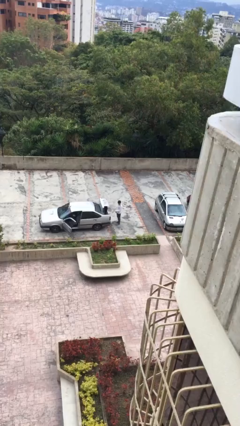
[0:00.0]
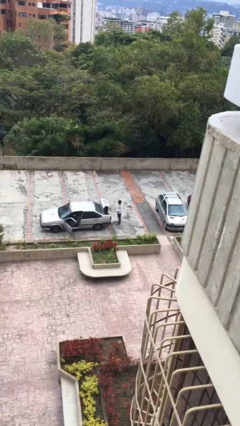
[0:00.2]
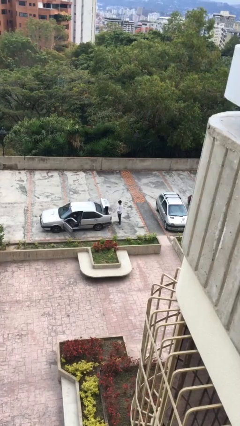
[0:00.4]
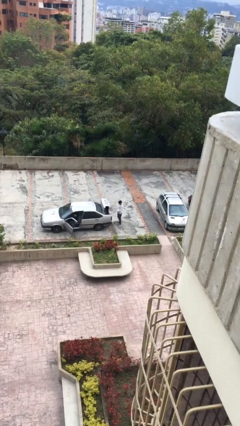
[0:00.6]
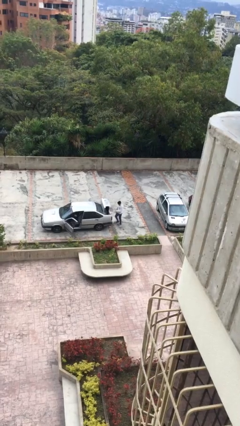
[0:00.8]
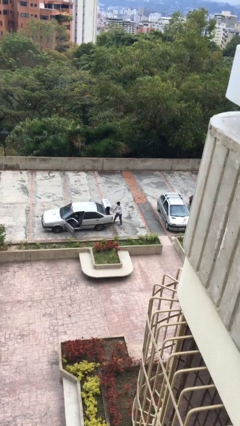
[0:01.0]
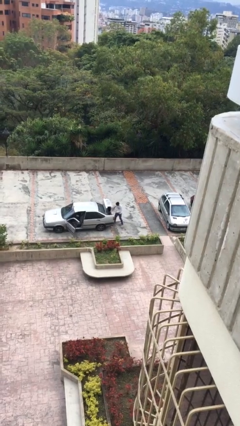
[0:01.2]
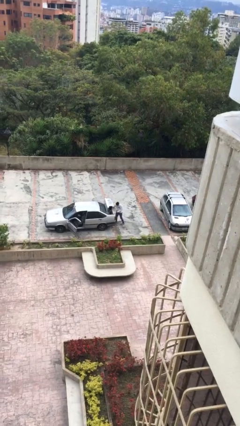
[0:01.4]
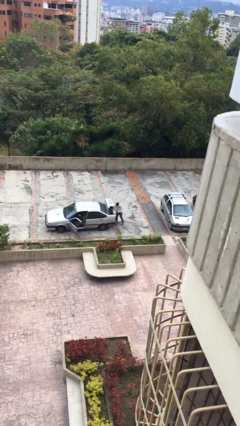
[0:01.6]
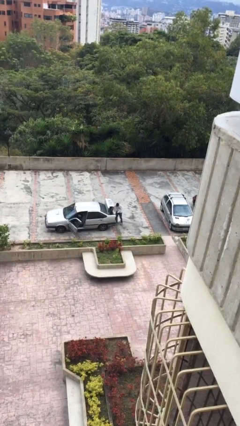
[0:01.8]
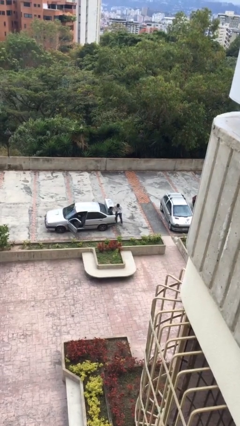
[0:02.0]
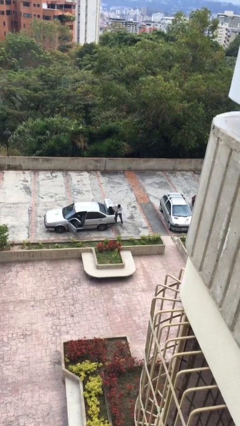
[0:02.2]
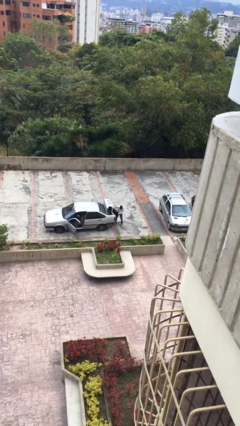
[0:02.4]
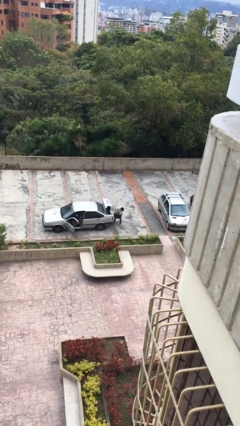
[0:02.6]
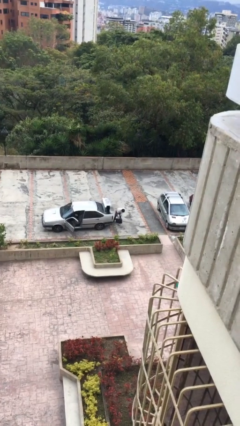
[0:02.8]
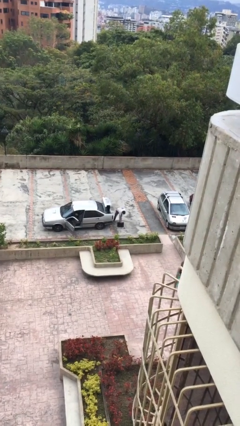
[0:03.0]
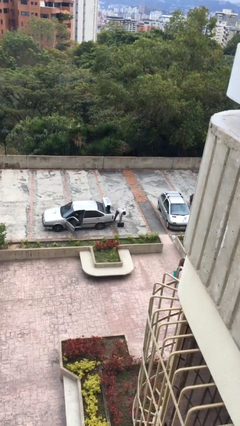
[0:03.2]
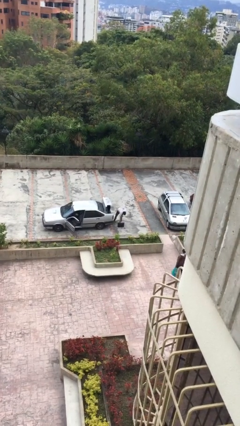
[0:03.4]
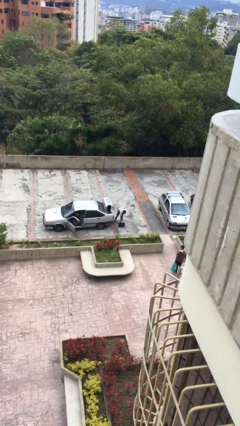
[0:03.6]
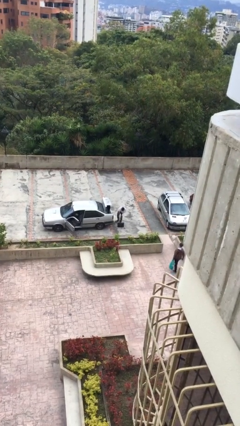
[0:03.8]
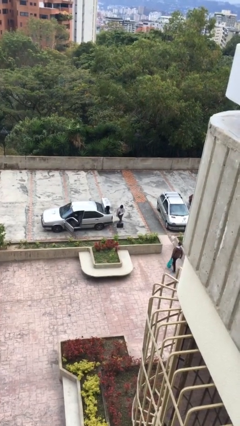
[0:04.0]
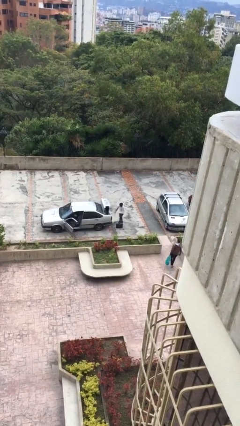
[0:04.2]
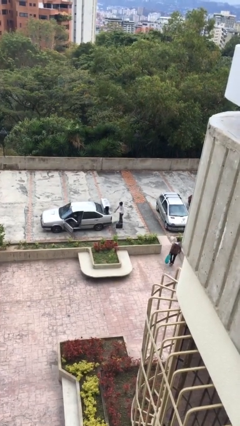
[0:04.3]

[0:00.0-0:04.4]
person unloads car

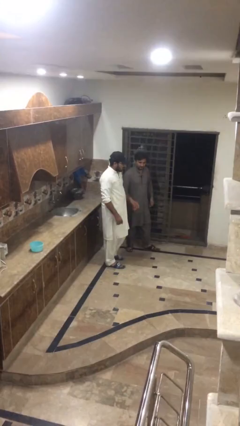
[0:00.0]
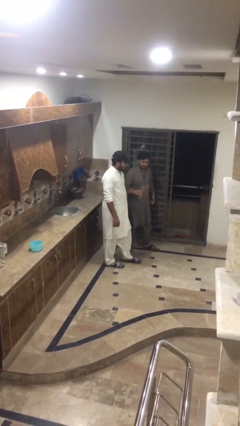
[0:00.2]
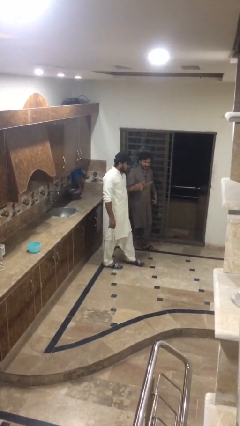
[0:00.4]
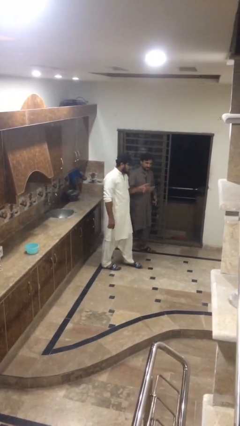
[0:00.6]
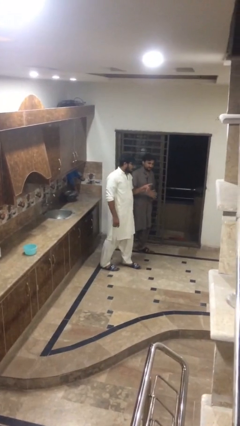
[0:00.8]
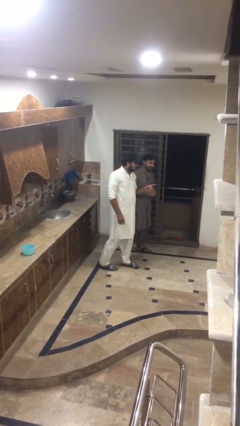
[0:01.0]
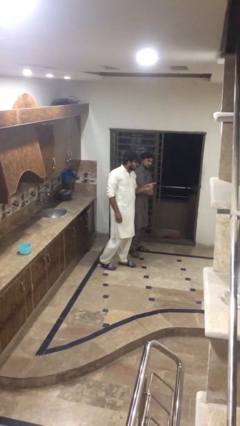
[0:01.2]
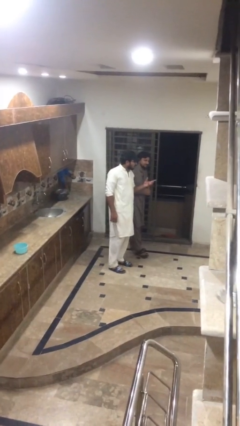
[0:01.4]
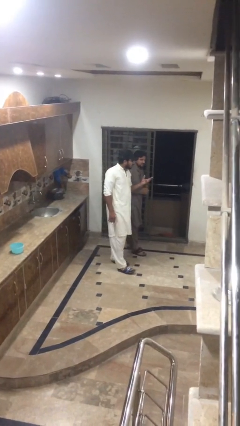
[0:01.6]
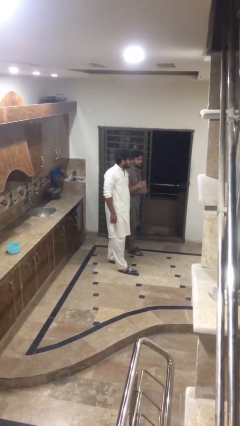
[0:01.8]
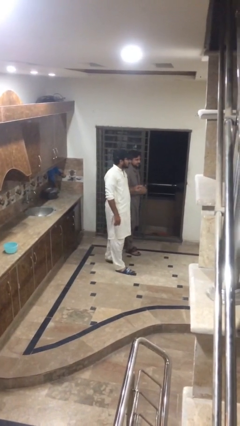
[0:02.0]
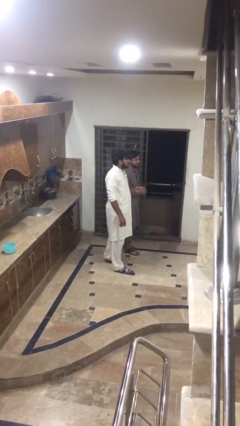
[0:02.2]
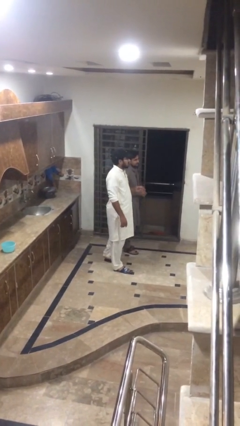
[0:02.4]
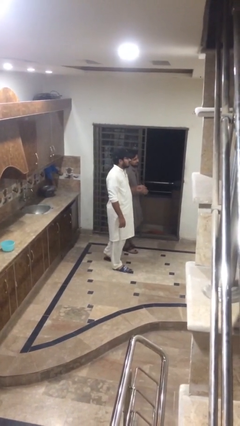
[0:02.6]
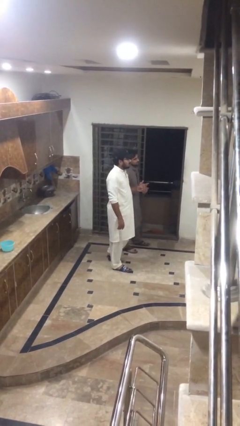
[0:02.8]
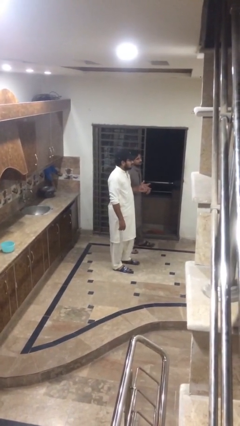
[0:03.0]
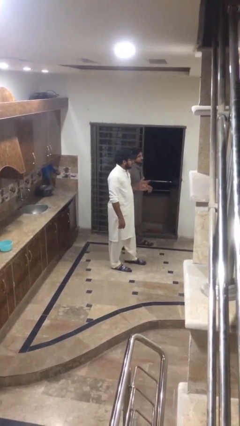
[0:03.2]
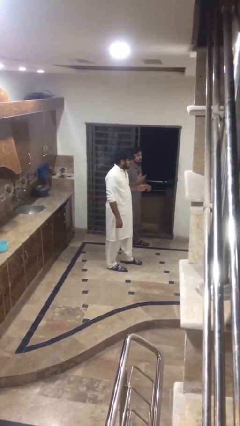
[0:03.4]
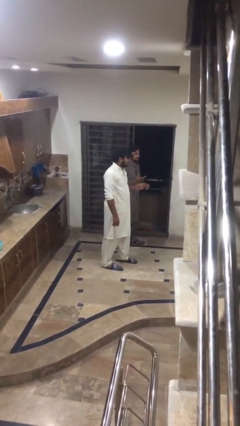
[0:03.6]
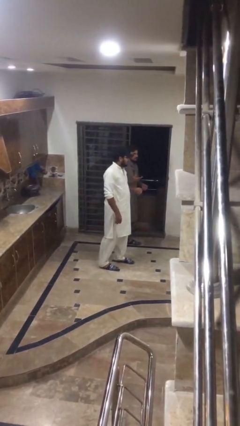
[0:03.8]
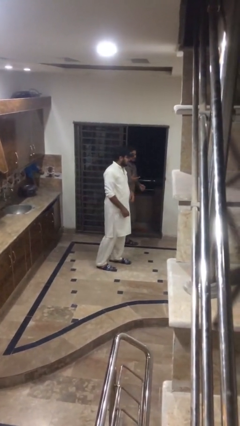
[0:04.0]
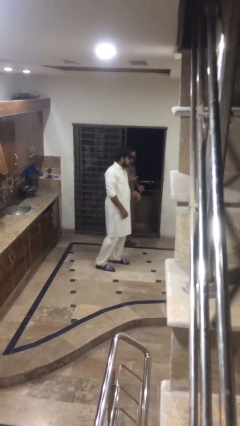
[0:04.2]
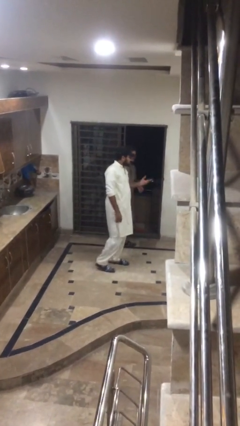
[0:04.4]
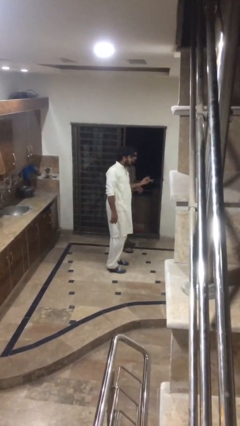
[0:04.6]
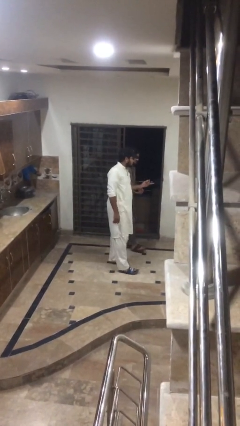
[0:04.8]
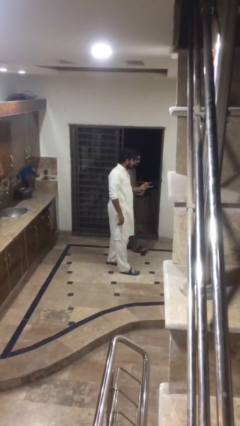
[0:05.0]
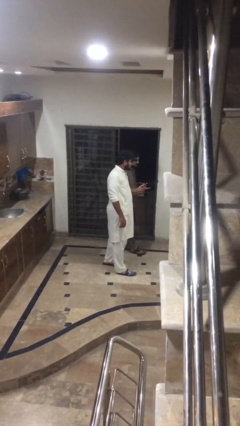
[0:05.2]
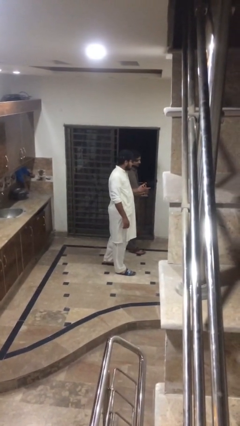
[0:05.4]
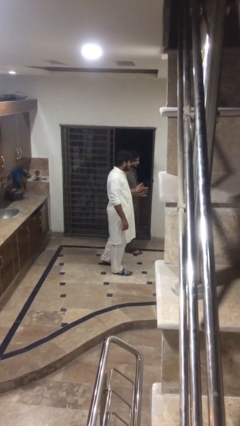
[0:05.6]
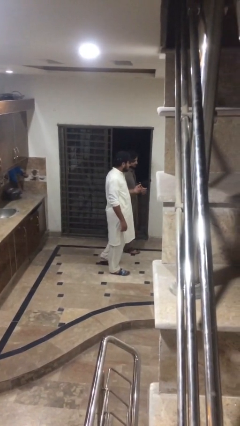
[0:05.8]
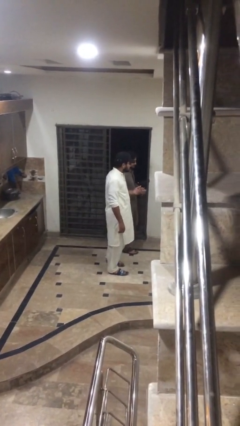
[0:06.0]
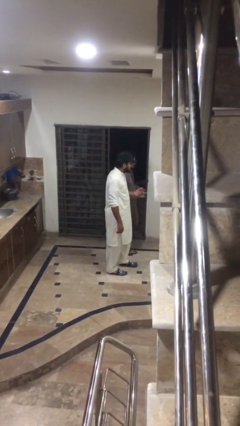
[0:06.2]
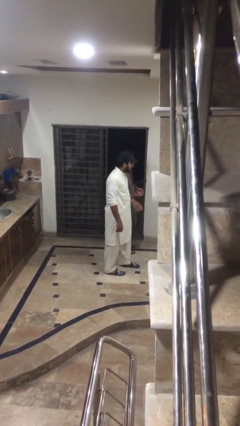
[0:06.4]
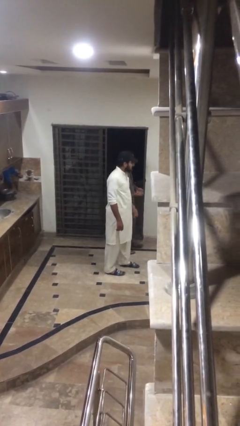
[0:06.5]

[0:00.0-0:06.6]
person talks to person

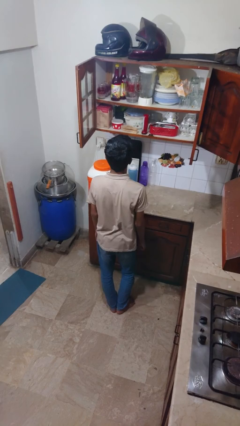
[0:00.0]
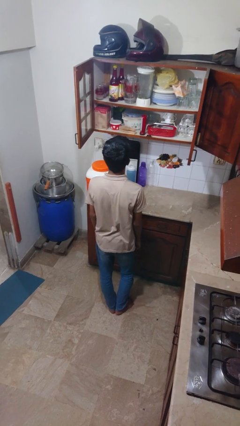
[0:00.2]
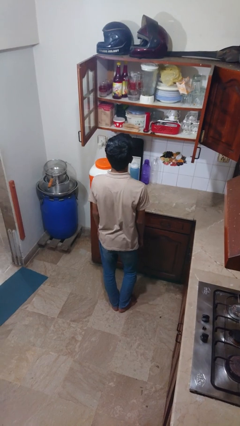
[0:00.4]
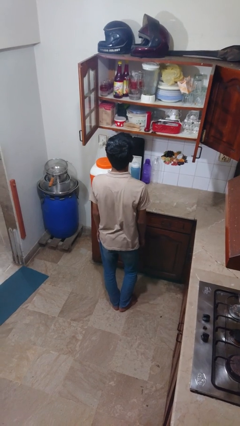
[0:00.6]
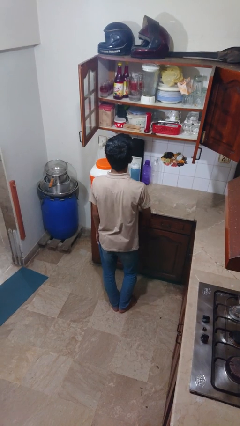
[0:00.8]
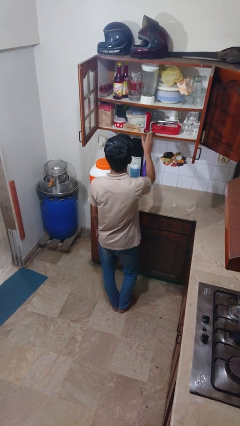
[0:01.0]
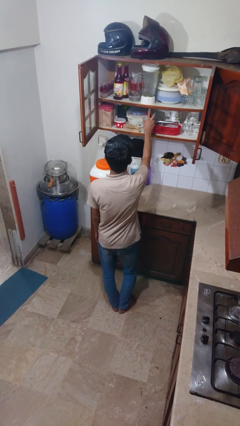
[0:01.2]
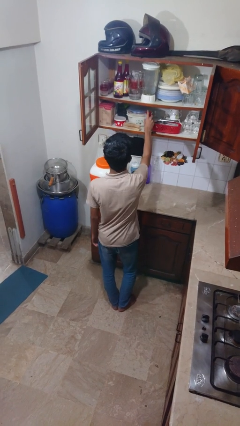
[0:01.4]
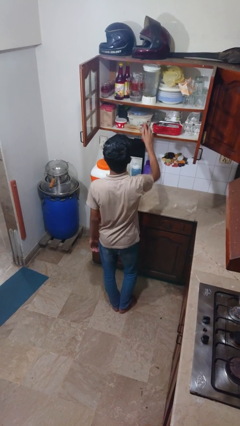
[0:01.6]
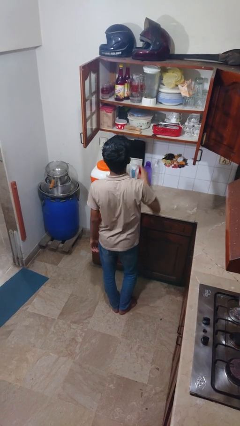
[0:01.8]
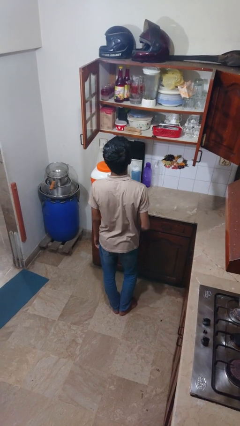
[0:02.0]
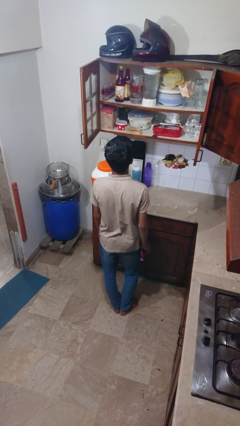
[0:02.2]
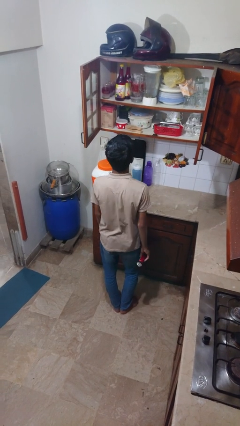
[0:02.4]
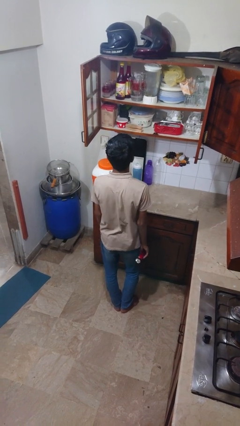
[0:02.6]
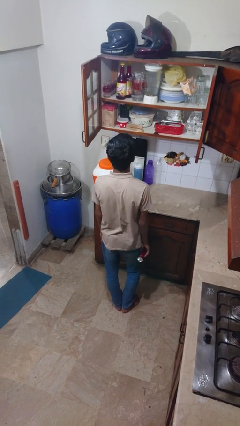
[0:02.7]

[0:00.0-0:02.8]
person picks up object from cabinet

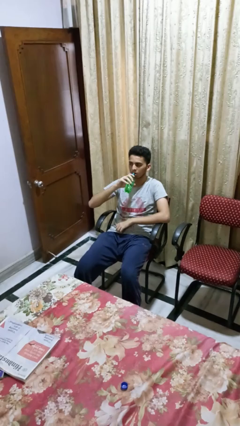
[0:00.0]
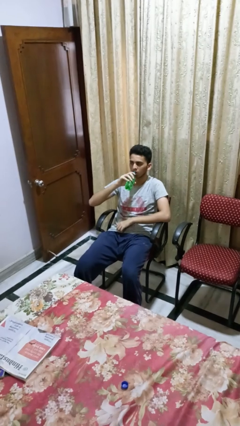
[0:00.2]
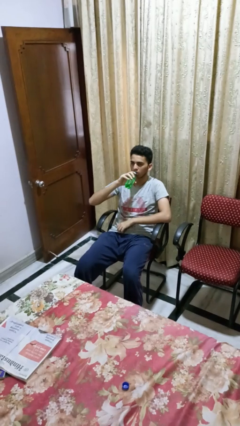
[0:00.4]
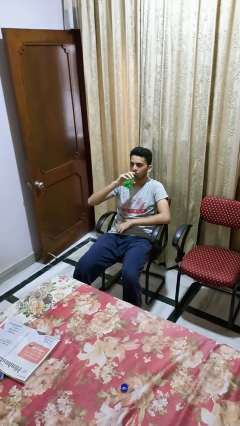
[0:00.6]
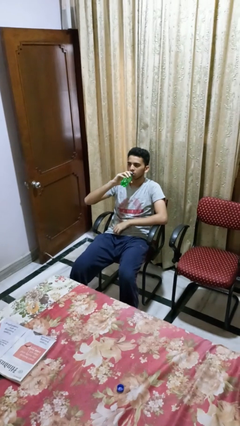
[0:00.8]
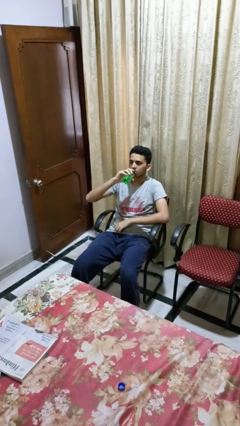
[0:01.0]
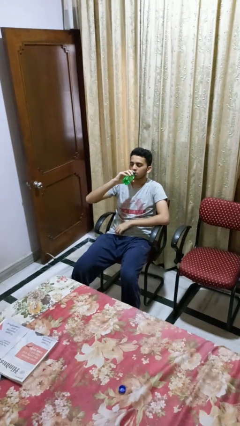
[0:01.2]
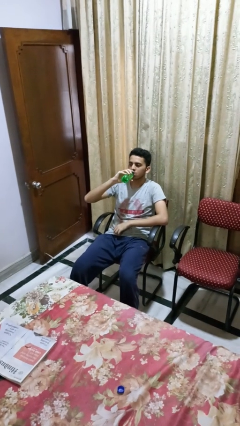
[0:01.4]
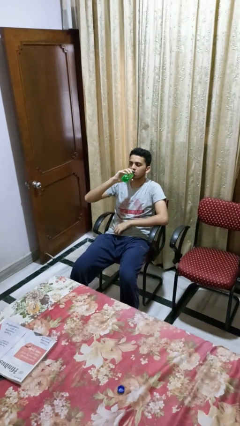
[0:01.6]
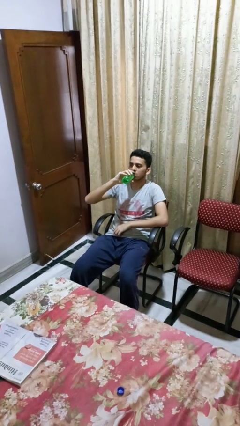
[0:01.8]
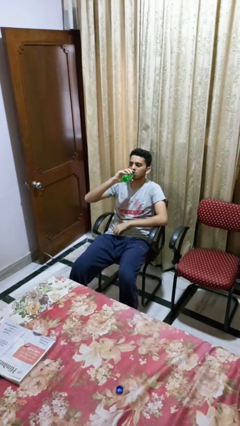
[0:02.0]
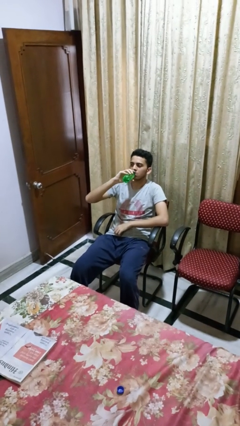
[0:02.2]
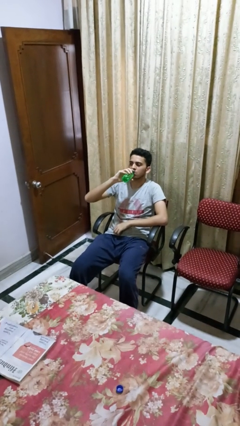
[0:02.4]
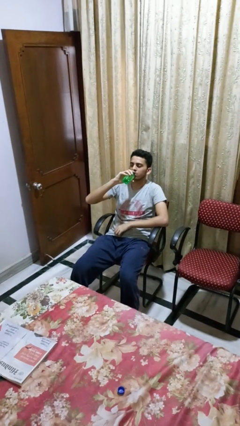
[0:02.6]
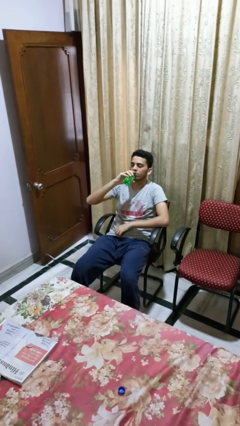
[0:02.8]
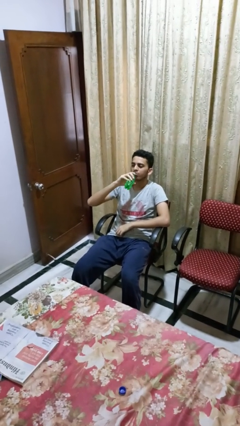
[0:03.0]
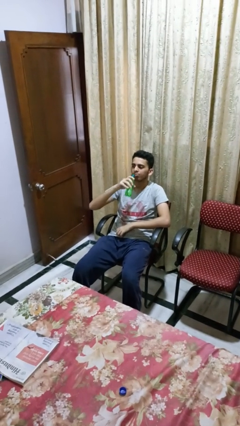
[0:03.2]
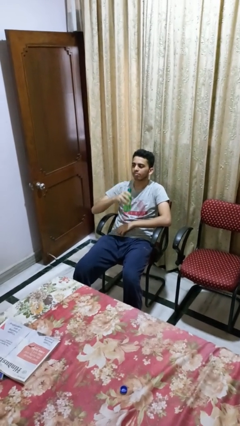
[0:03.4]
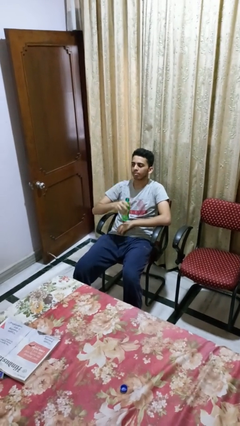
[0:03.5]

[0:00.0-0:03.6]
person drinks from bottle
